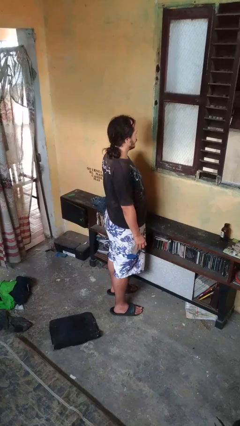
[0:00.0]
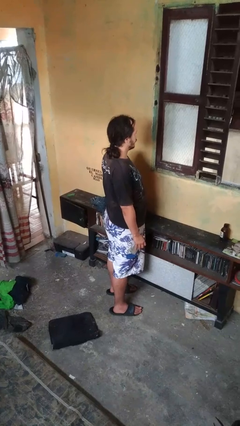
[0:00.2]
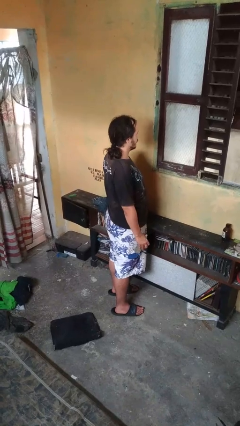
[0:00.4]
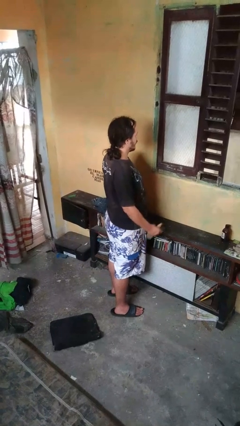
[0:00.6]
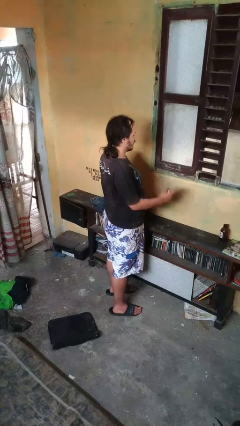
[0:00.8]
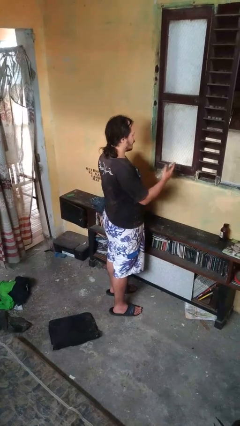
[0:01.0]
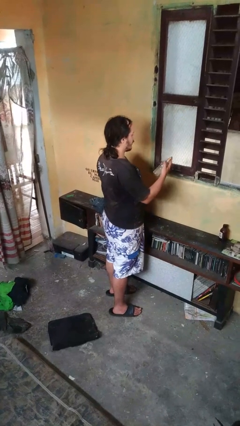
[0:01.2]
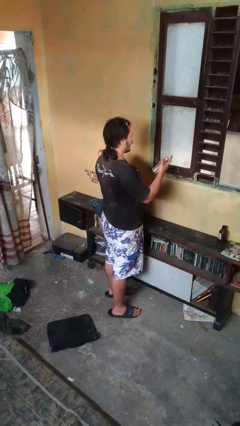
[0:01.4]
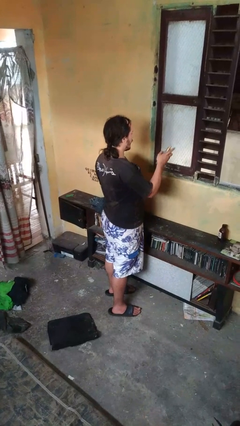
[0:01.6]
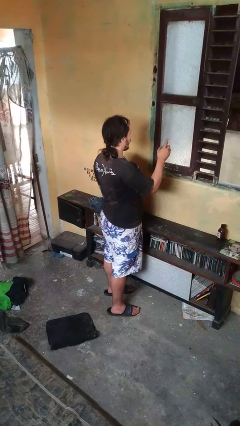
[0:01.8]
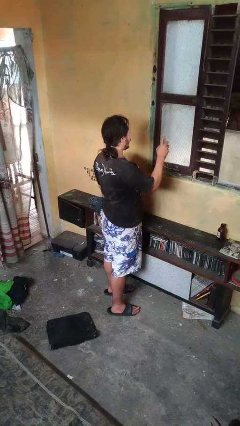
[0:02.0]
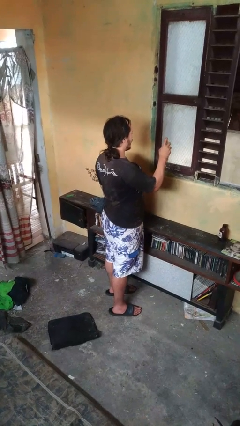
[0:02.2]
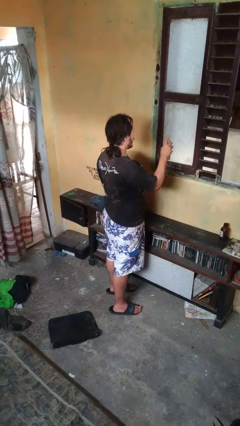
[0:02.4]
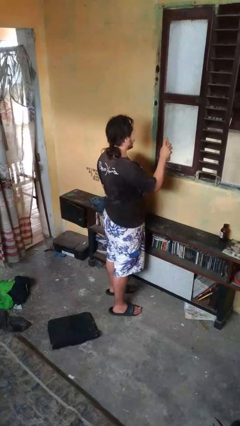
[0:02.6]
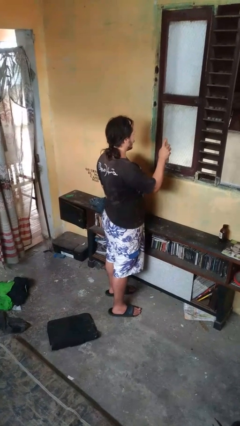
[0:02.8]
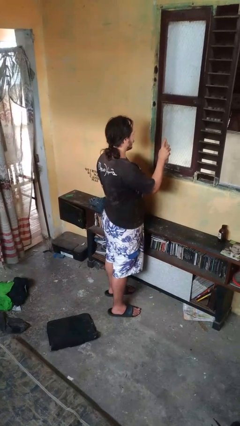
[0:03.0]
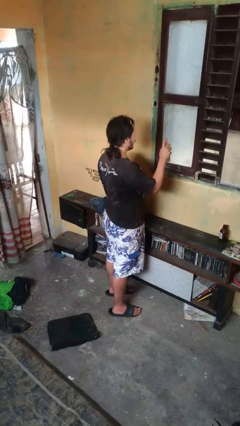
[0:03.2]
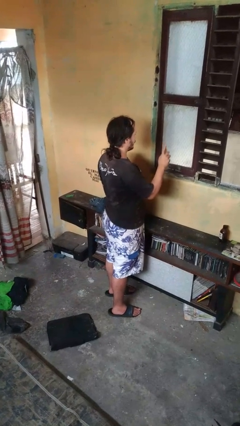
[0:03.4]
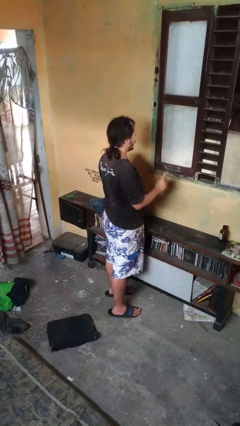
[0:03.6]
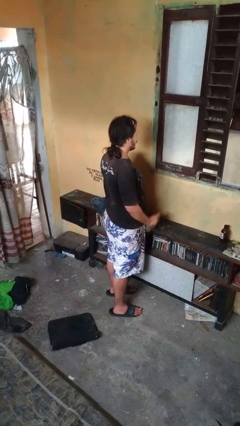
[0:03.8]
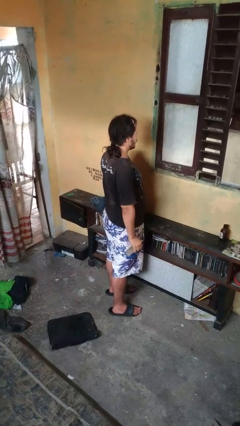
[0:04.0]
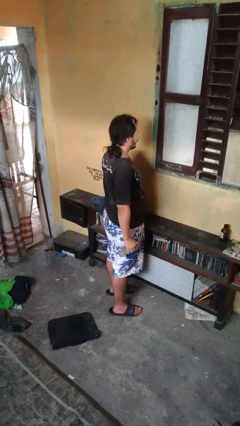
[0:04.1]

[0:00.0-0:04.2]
person sprays from bottle

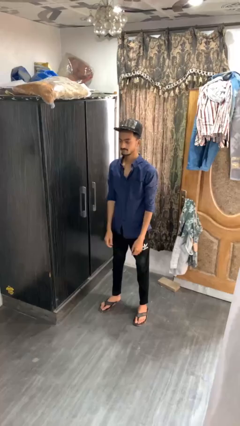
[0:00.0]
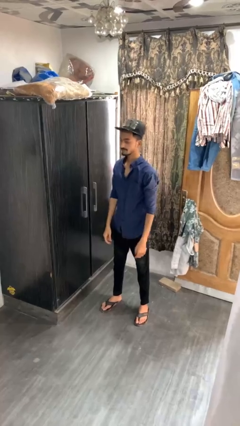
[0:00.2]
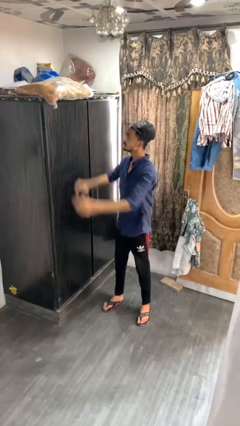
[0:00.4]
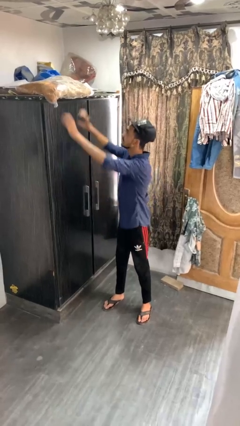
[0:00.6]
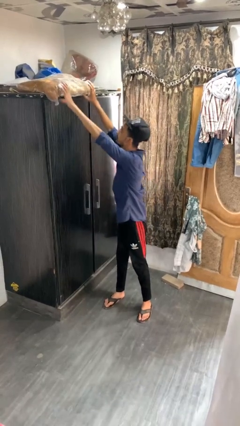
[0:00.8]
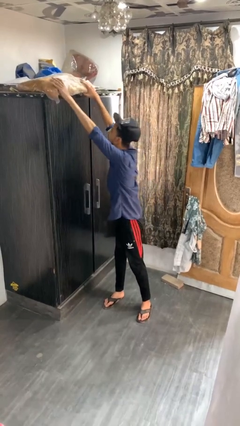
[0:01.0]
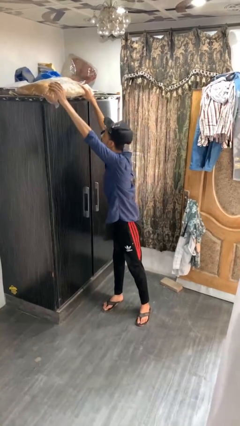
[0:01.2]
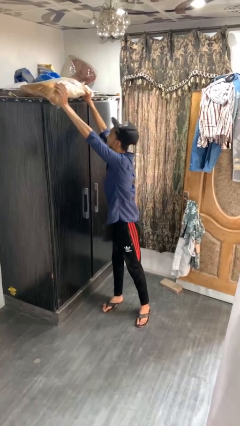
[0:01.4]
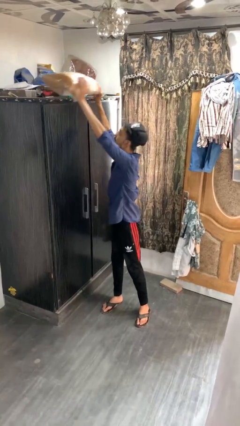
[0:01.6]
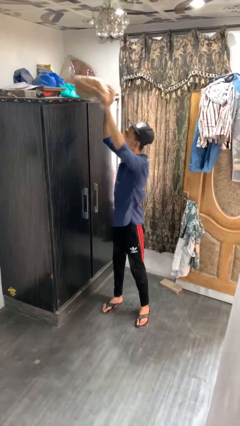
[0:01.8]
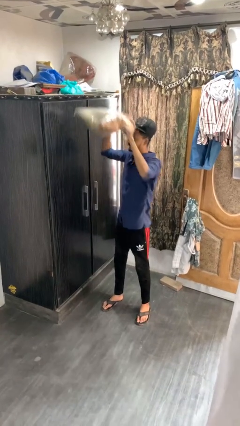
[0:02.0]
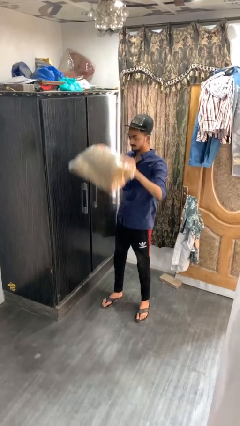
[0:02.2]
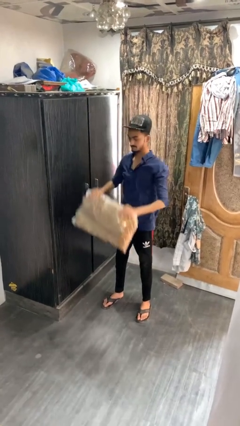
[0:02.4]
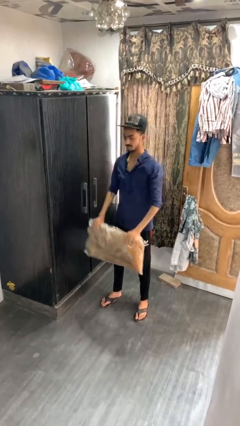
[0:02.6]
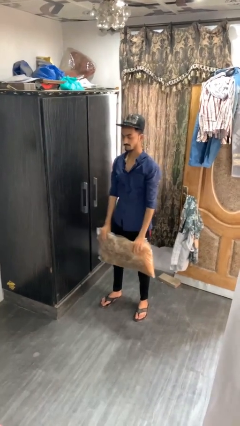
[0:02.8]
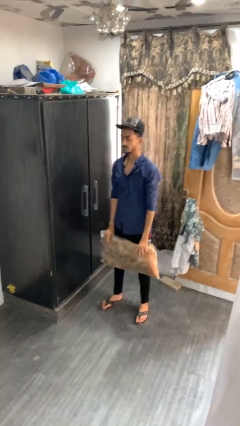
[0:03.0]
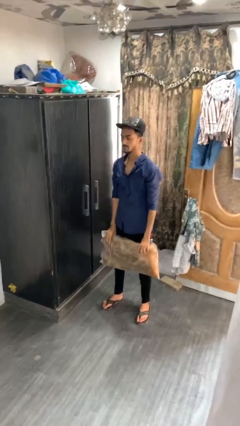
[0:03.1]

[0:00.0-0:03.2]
person picks up object from shelf

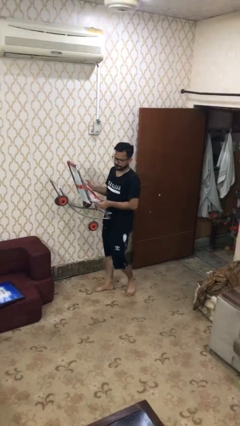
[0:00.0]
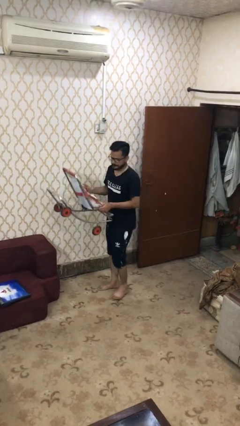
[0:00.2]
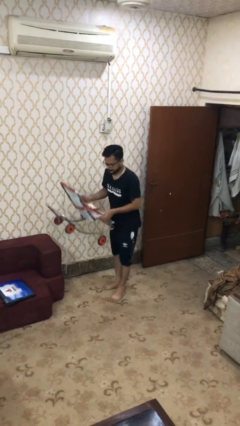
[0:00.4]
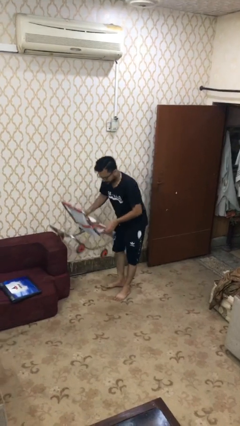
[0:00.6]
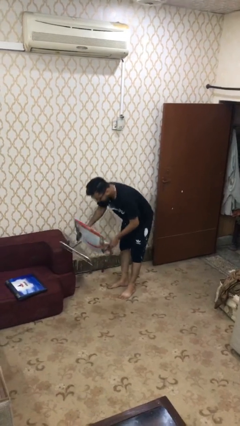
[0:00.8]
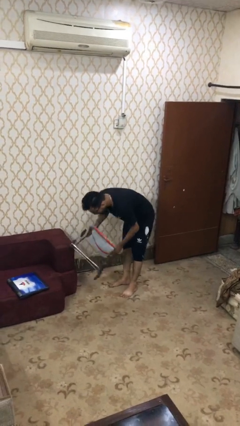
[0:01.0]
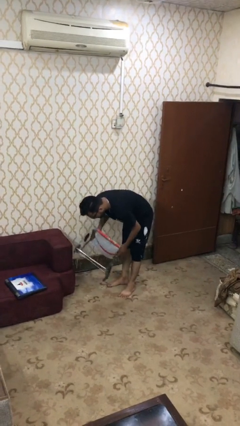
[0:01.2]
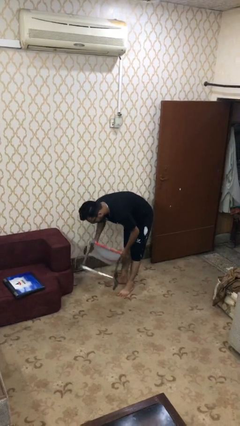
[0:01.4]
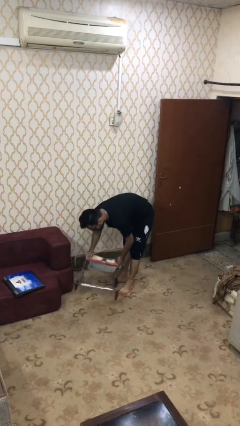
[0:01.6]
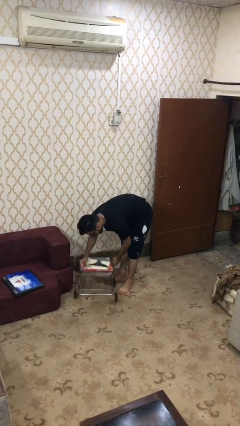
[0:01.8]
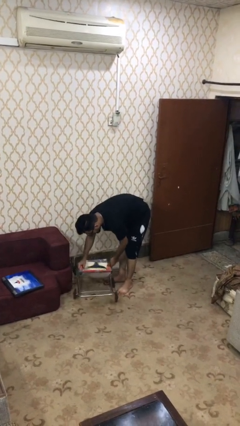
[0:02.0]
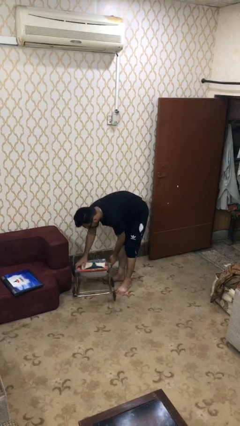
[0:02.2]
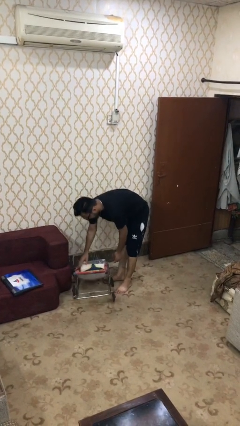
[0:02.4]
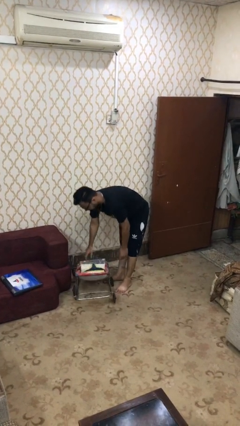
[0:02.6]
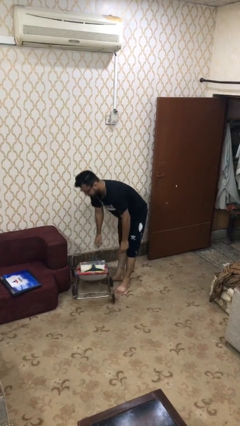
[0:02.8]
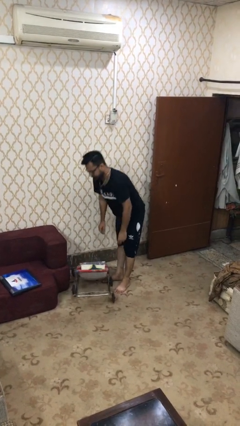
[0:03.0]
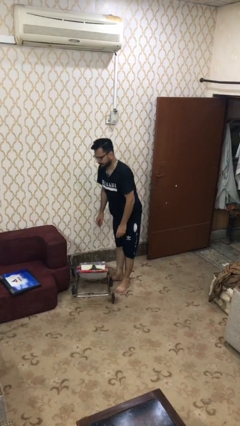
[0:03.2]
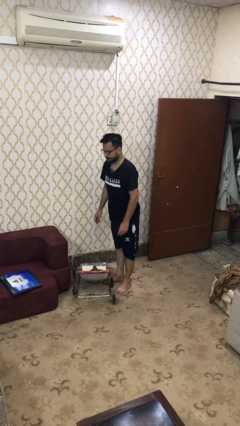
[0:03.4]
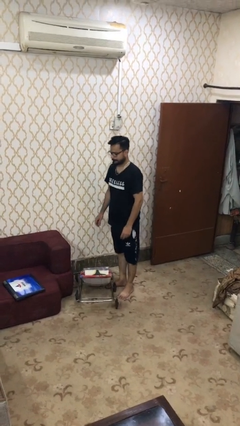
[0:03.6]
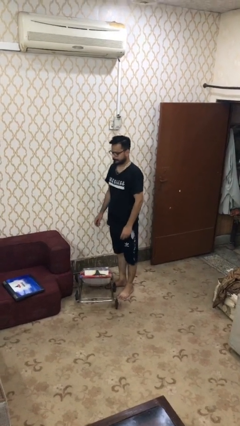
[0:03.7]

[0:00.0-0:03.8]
person puts down object on floor

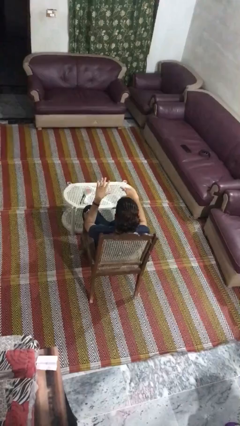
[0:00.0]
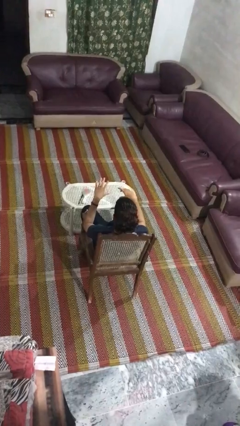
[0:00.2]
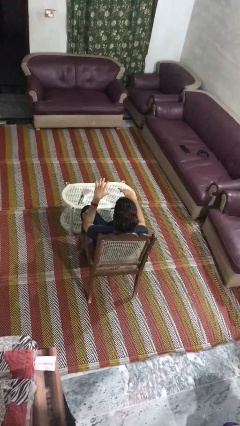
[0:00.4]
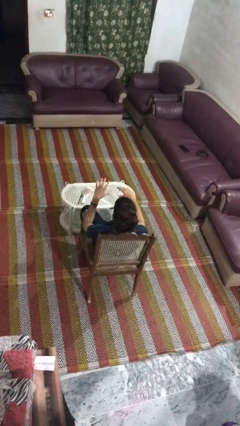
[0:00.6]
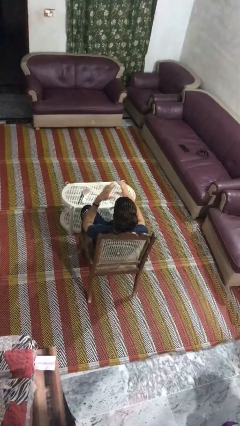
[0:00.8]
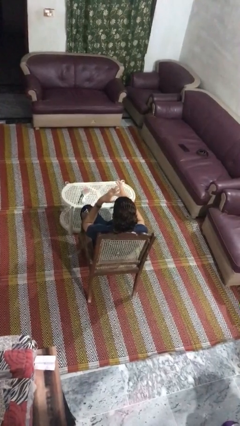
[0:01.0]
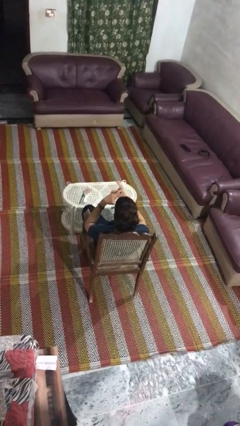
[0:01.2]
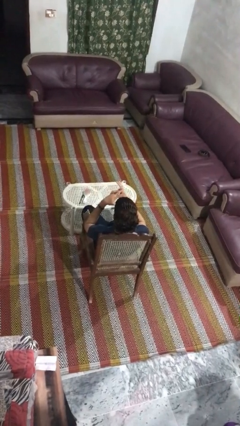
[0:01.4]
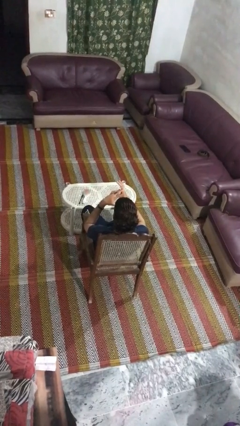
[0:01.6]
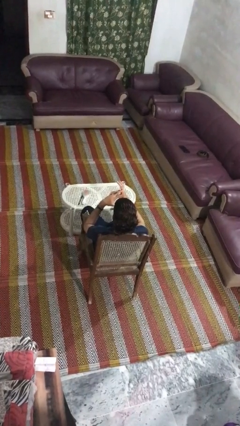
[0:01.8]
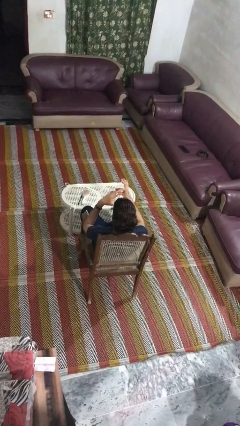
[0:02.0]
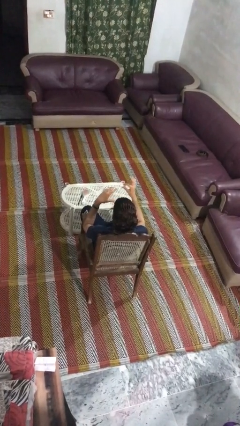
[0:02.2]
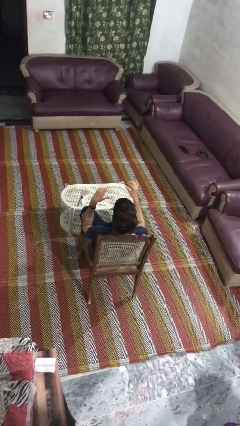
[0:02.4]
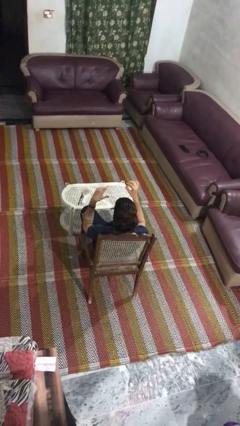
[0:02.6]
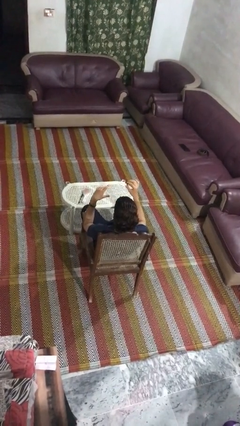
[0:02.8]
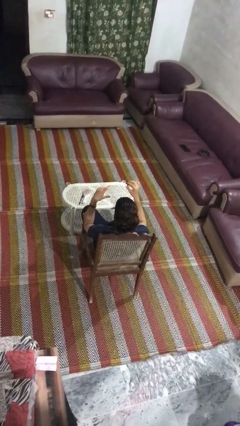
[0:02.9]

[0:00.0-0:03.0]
person takes off ring

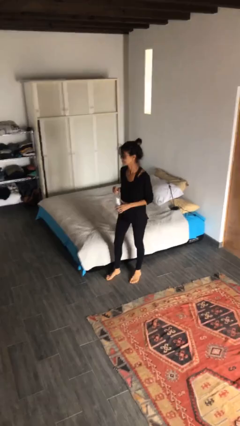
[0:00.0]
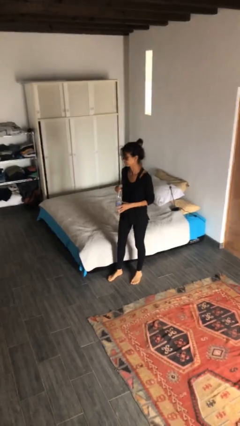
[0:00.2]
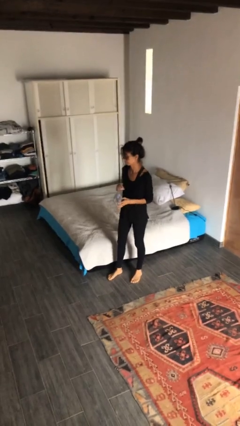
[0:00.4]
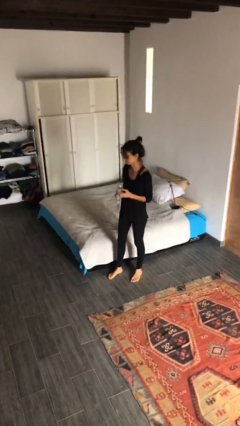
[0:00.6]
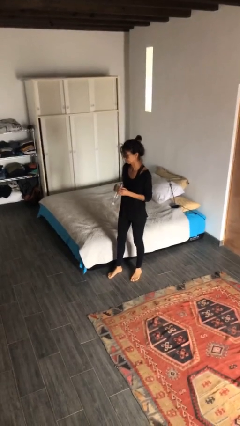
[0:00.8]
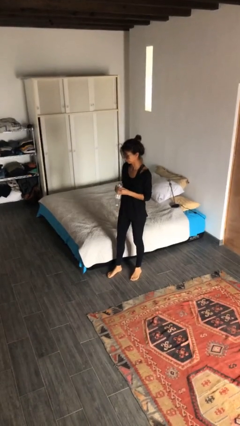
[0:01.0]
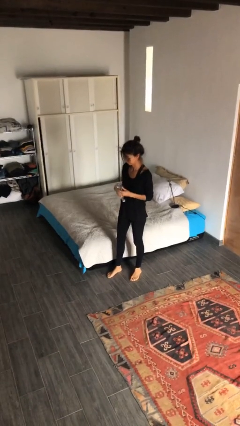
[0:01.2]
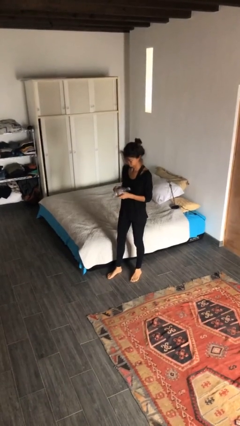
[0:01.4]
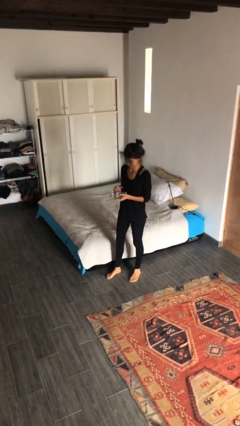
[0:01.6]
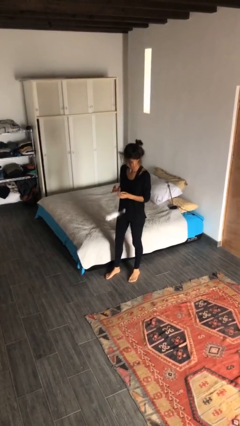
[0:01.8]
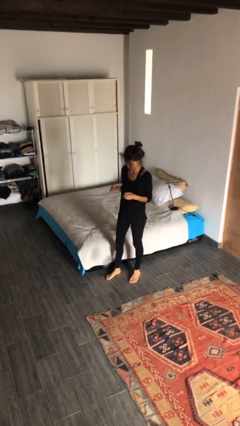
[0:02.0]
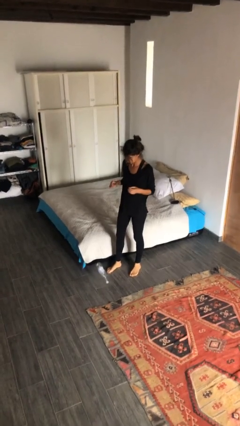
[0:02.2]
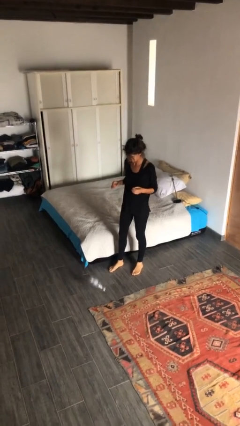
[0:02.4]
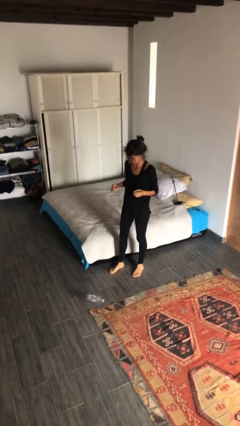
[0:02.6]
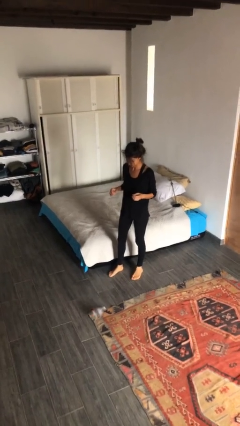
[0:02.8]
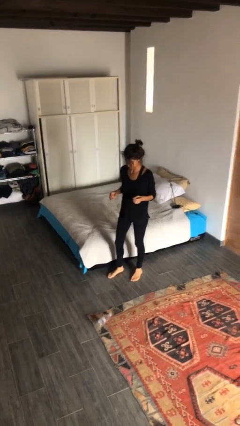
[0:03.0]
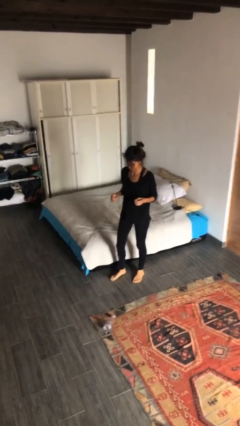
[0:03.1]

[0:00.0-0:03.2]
person drops object

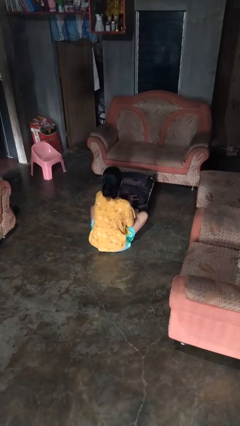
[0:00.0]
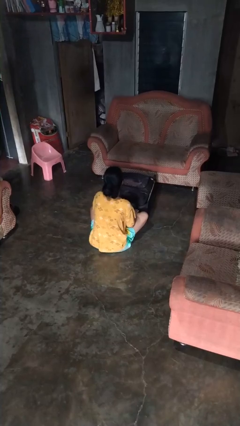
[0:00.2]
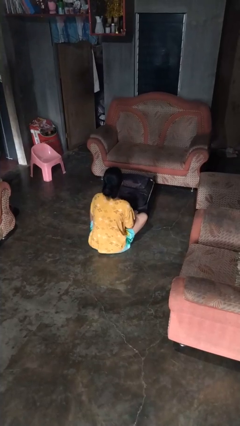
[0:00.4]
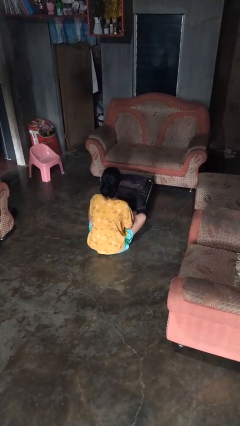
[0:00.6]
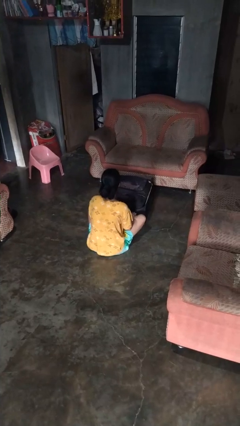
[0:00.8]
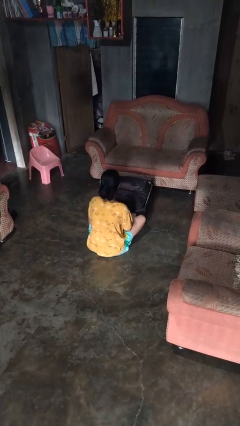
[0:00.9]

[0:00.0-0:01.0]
person opens suitcase
